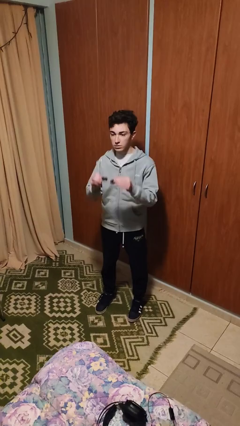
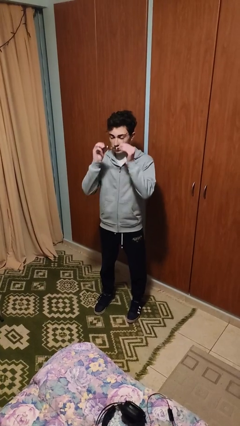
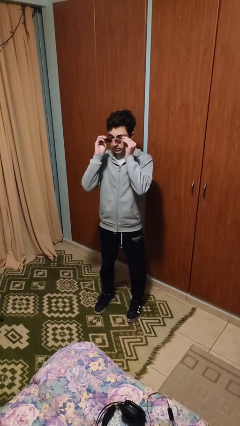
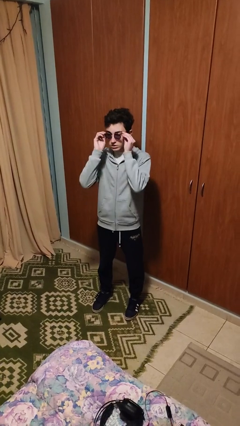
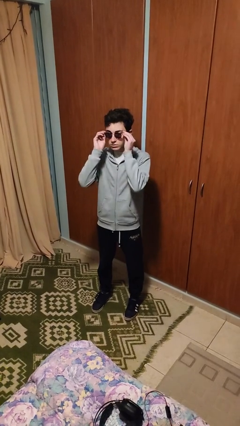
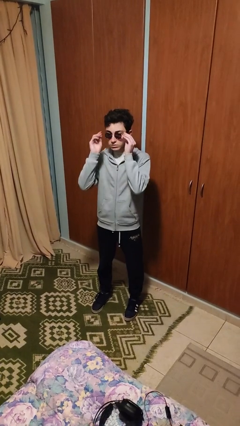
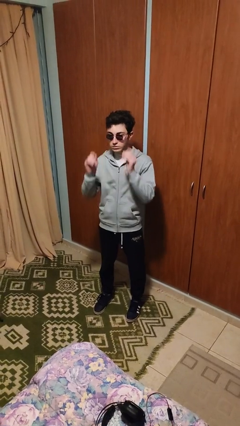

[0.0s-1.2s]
person puts on glasses

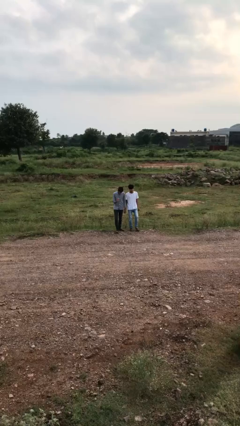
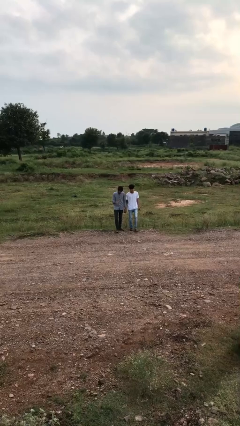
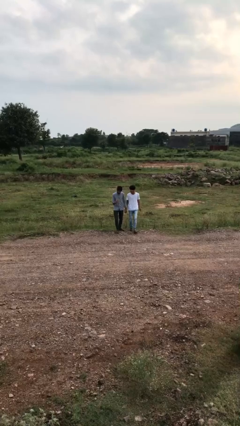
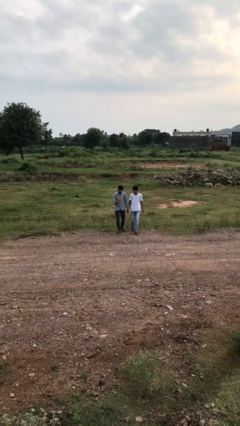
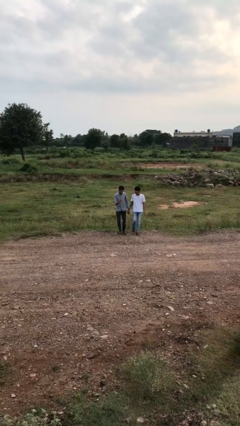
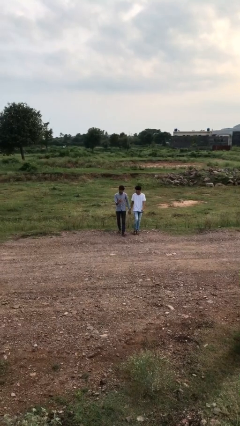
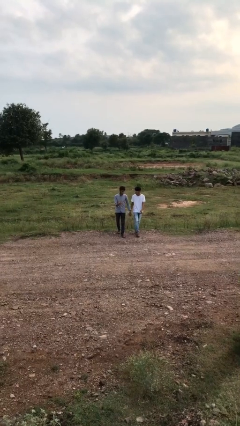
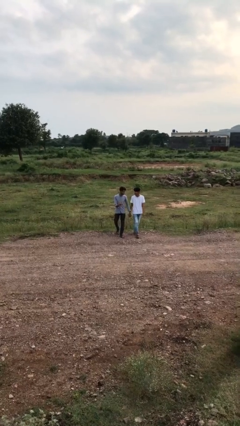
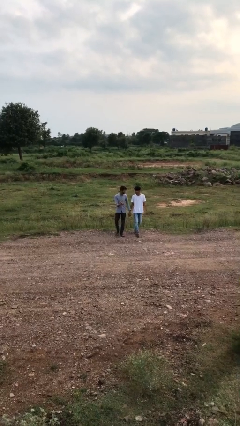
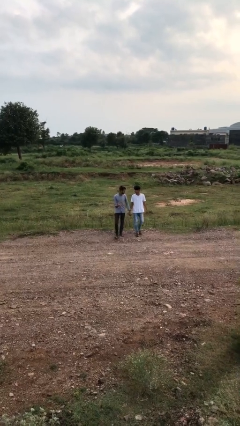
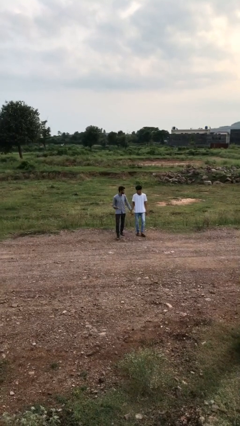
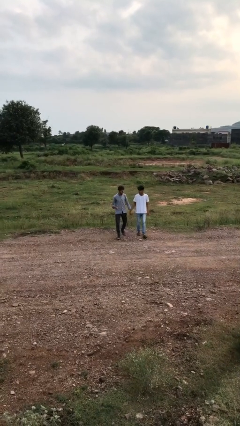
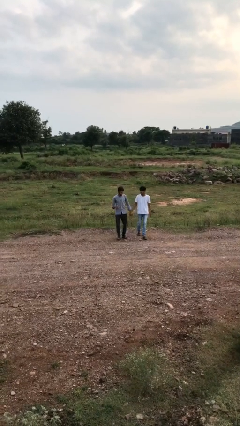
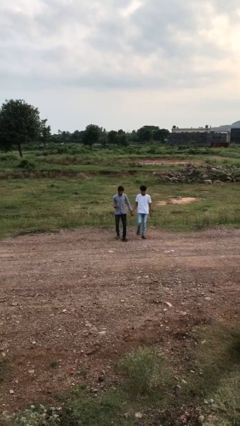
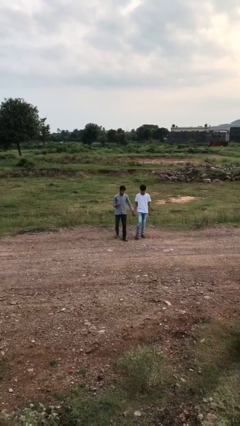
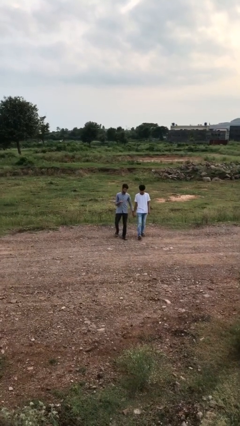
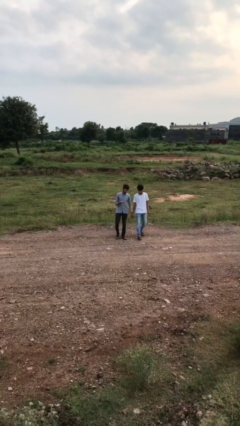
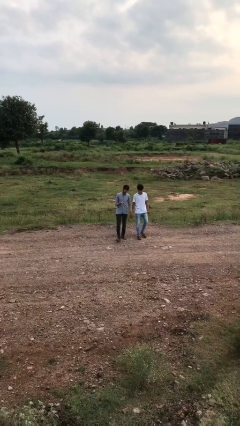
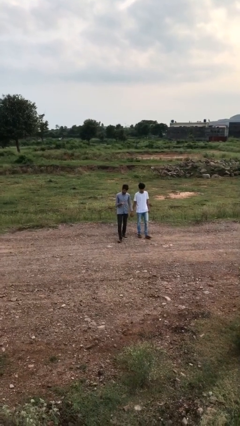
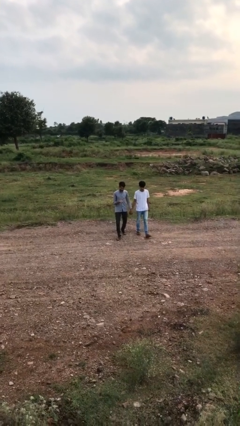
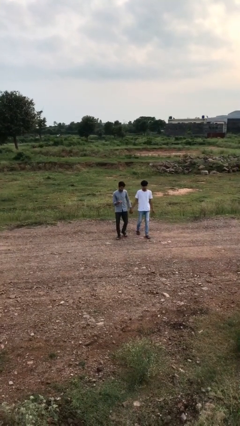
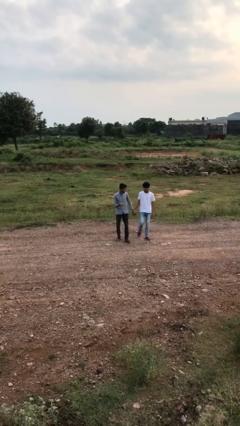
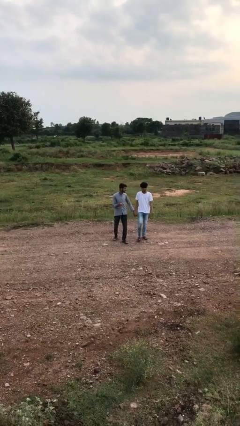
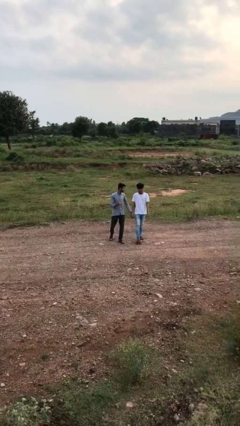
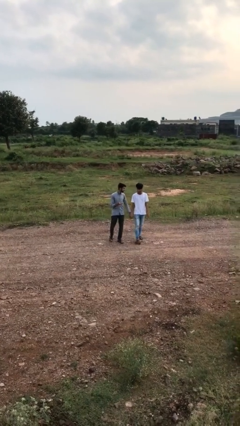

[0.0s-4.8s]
person holds hand

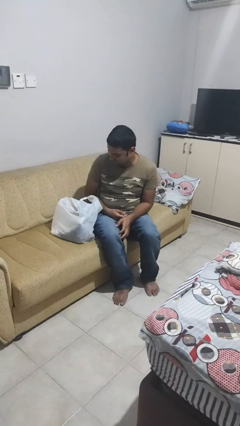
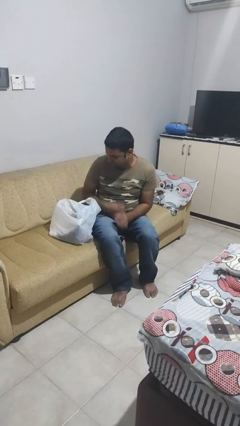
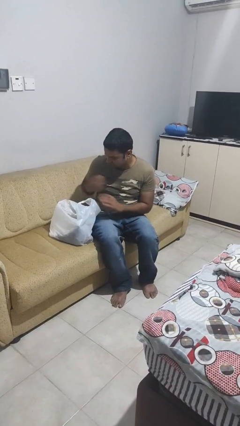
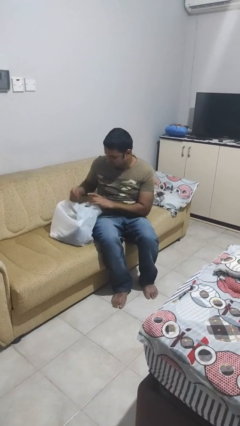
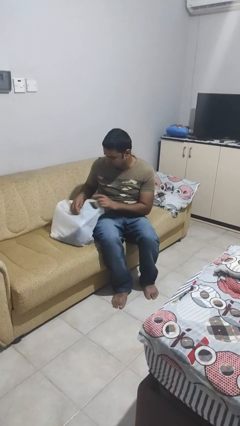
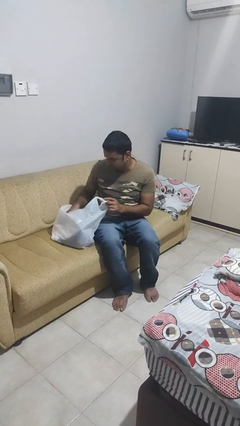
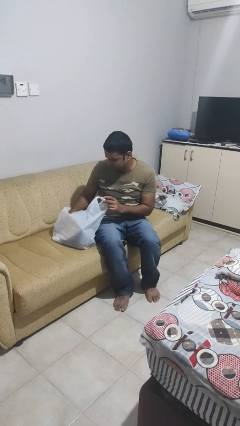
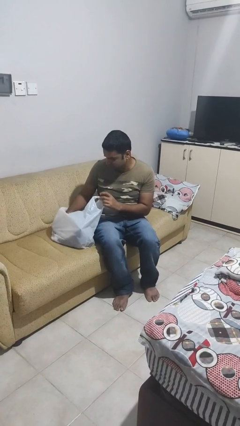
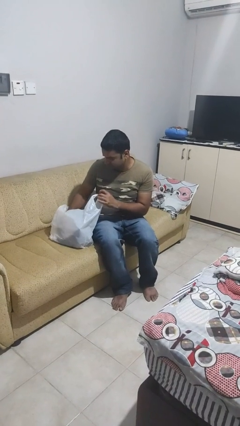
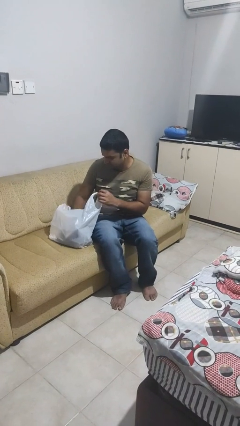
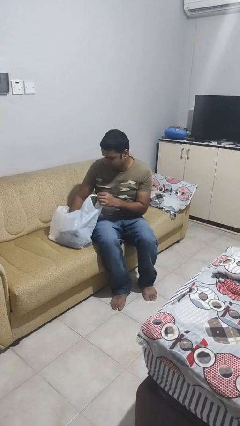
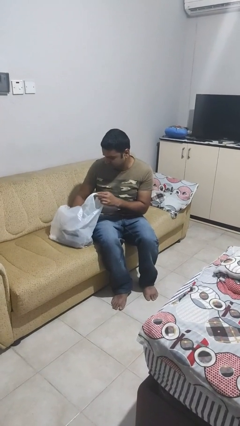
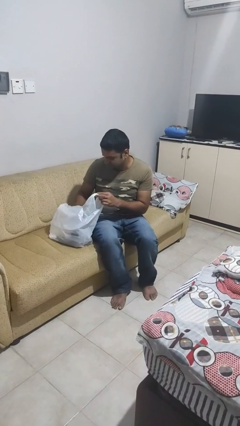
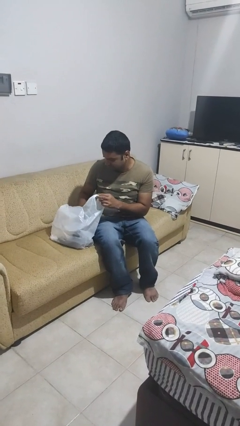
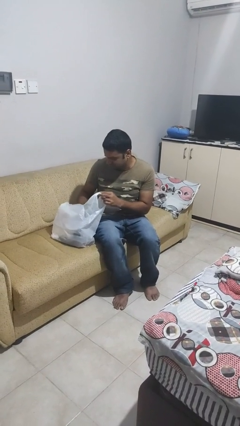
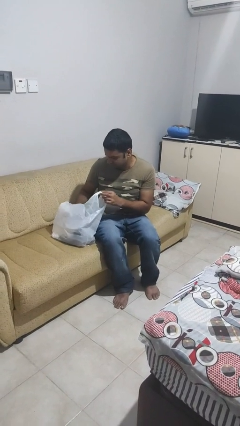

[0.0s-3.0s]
person searches in bag

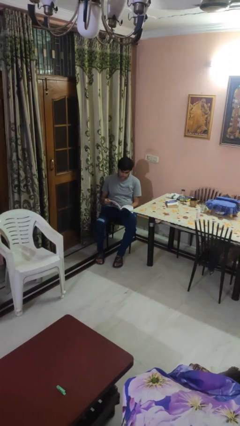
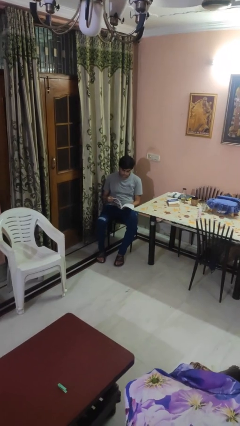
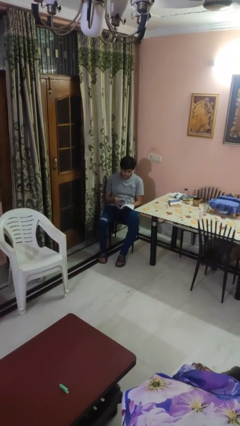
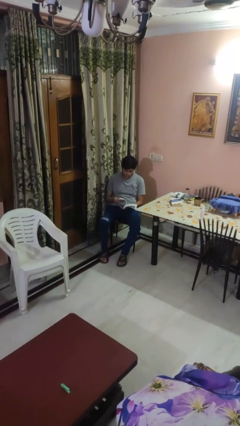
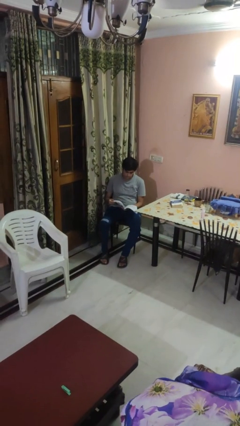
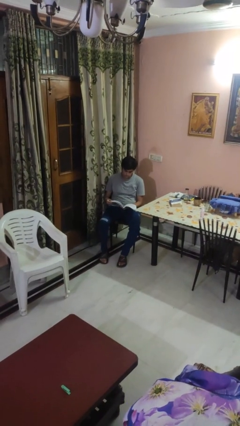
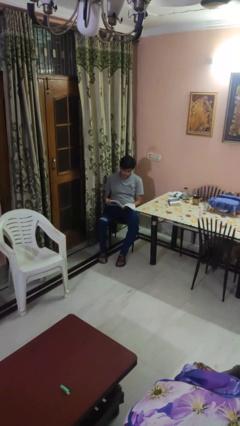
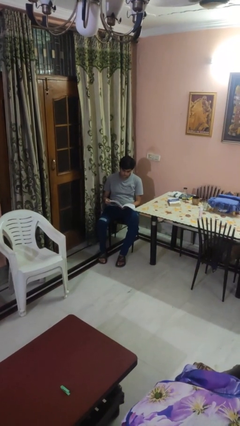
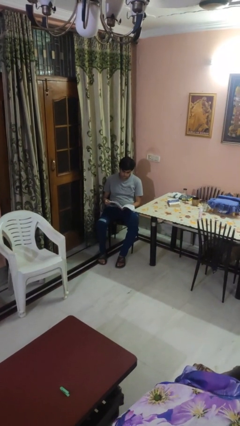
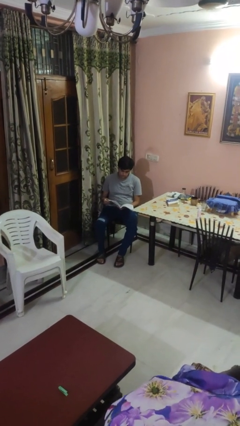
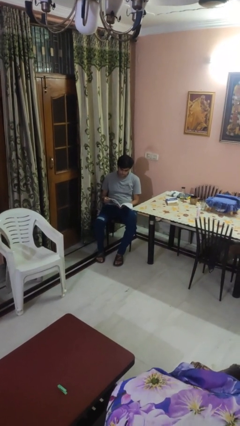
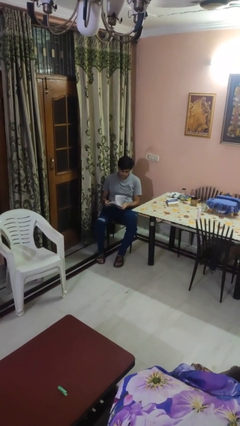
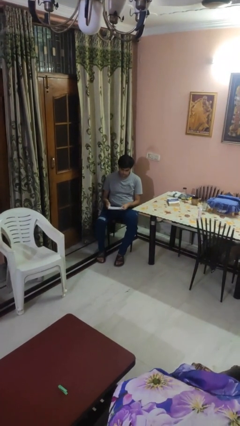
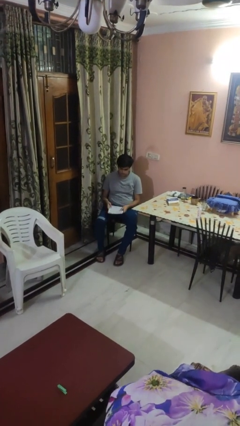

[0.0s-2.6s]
person reads magazine

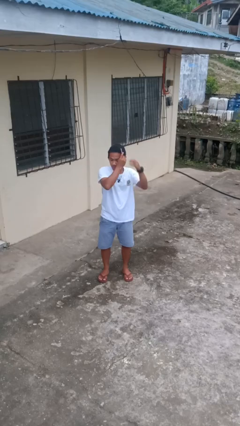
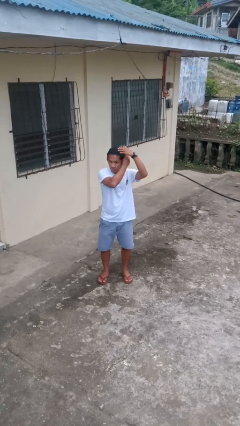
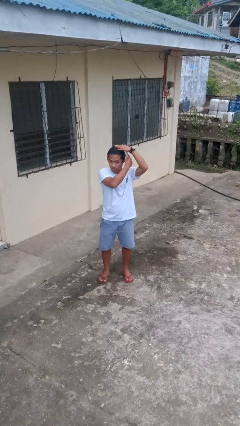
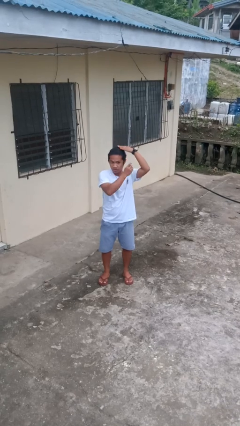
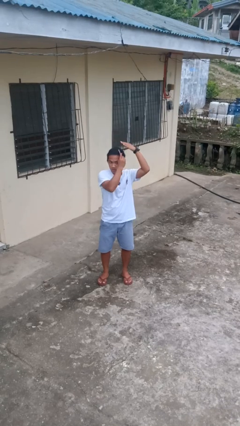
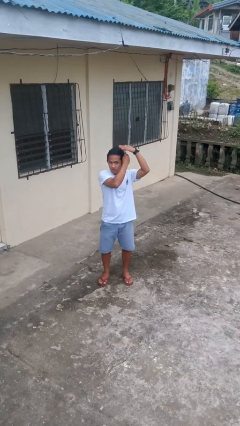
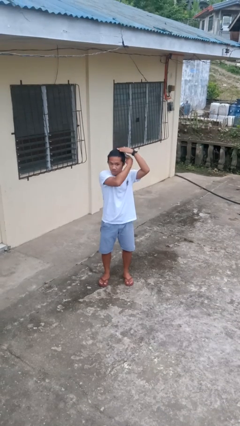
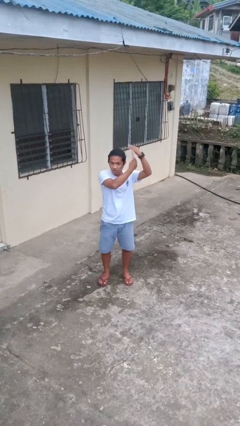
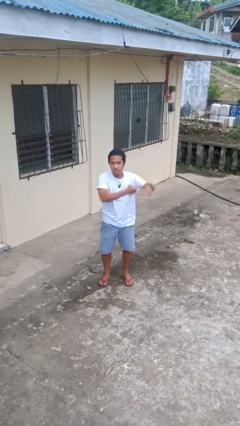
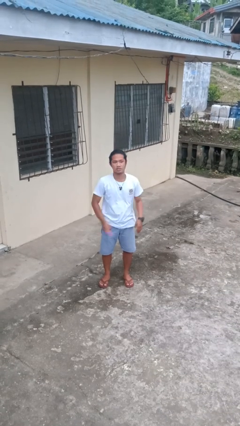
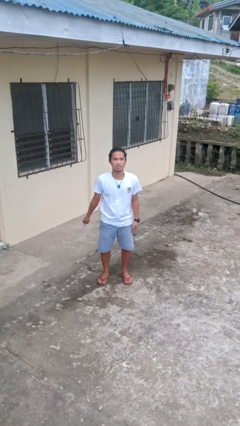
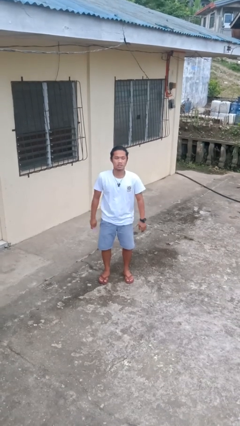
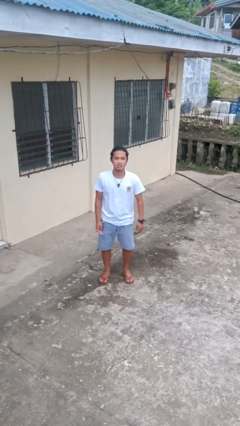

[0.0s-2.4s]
person brushes hair

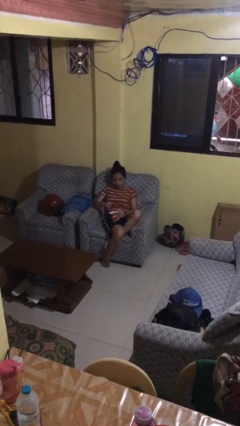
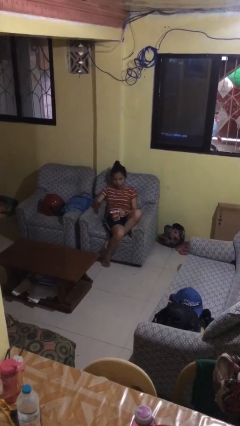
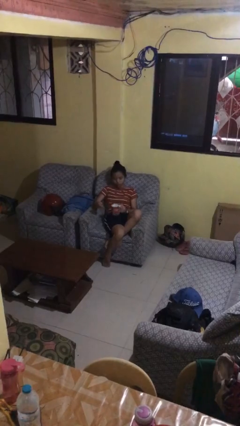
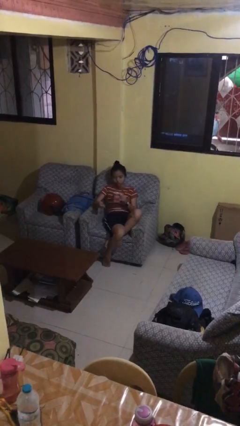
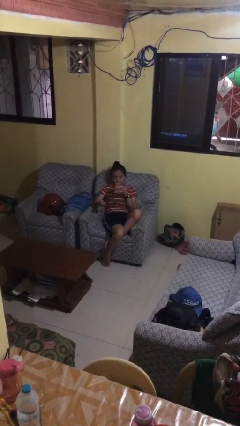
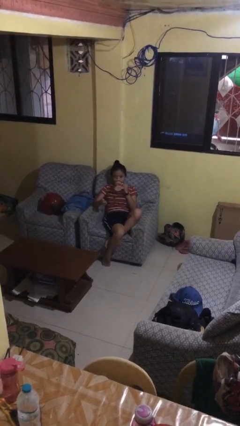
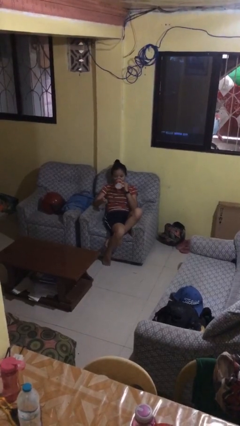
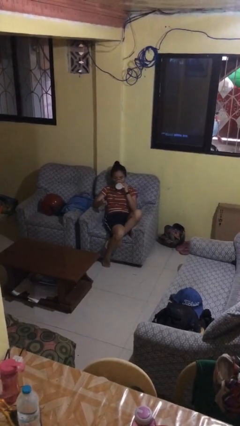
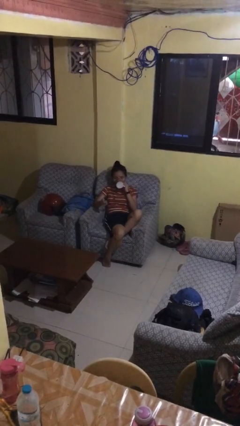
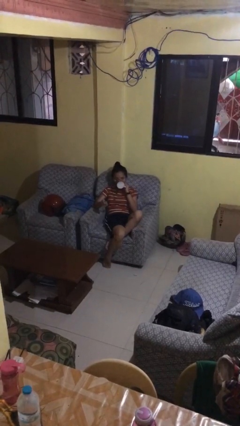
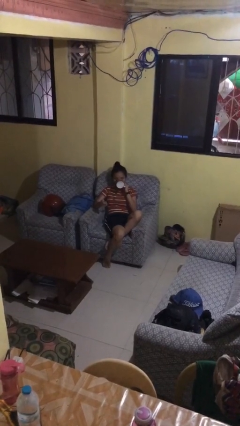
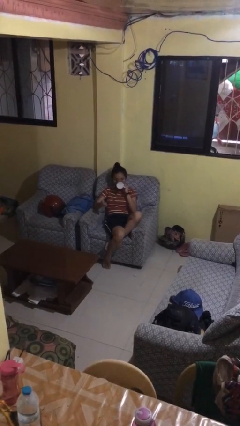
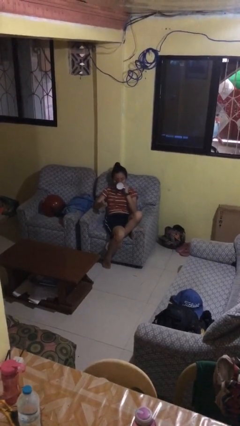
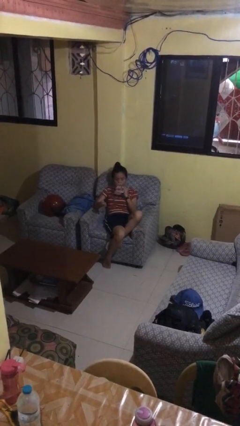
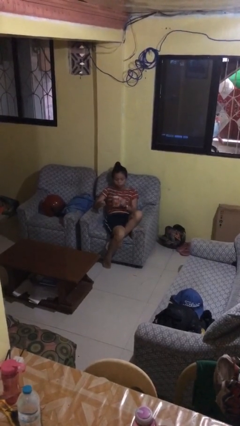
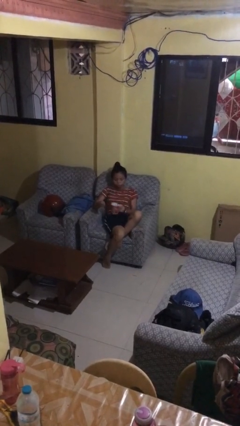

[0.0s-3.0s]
person drinks from mug

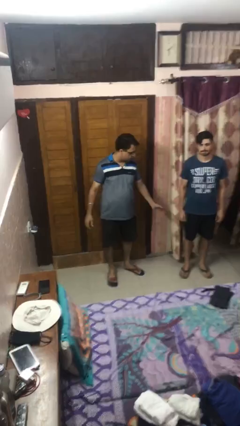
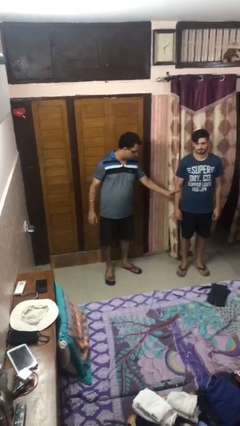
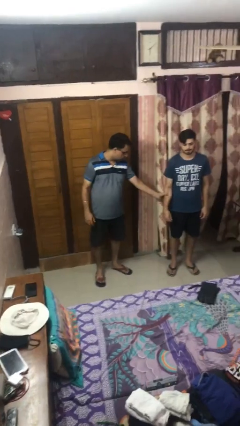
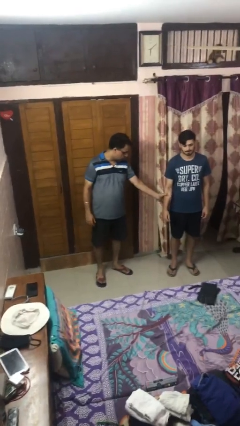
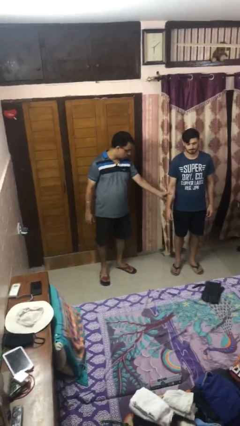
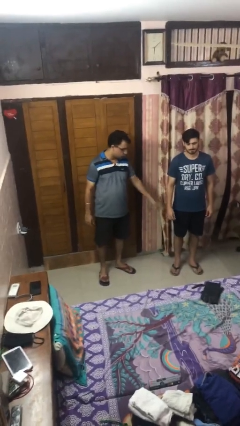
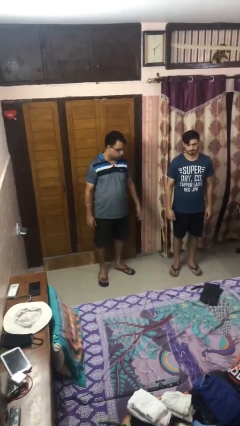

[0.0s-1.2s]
person grabs person by forearm
